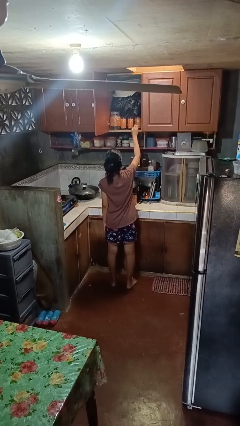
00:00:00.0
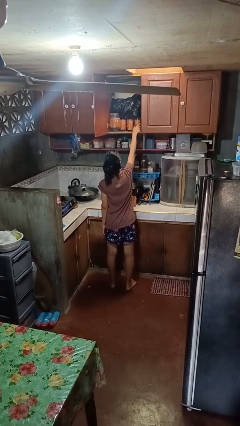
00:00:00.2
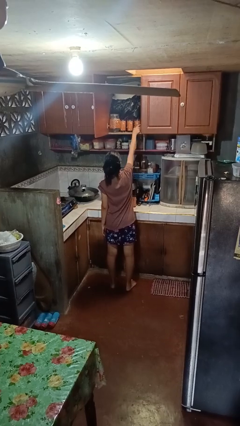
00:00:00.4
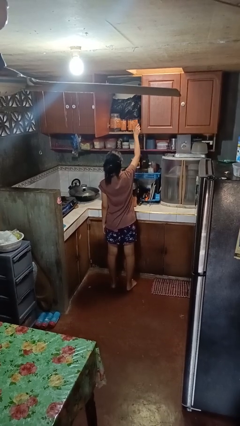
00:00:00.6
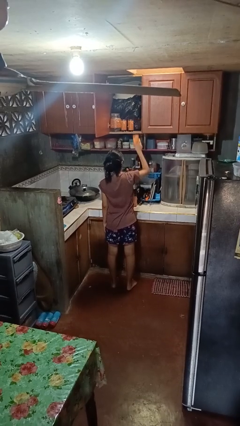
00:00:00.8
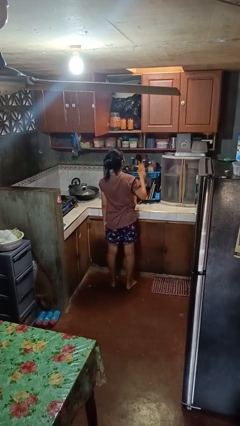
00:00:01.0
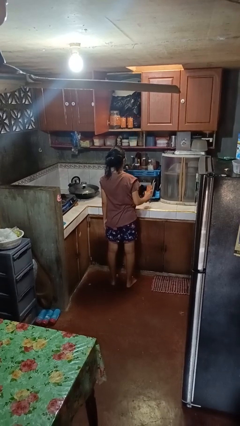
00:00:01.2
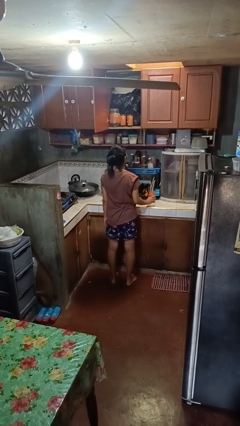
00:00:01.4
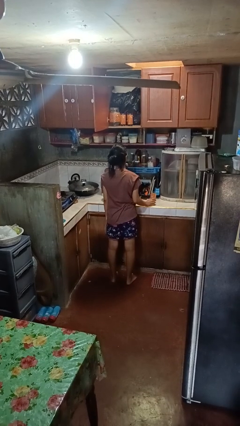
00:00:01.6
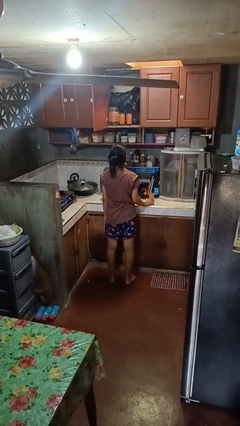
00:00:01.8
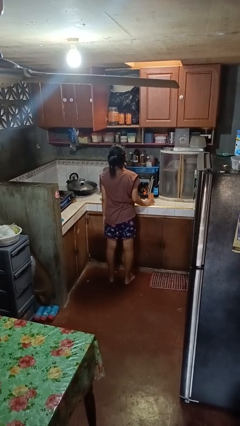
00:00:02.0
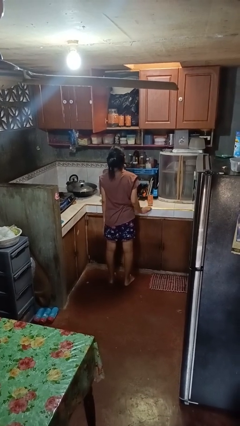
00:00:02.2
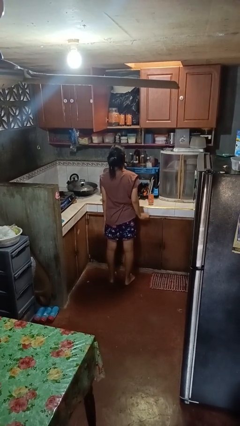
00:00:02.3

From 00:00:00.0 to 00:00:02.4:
person takes object from cabinet

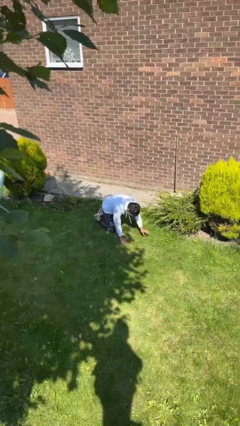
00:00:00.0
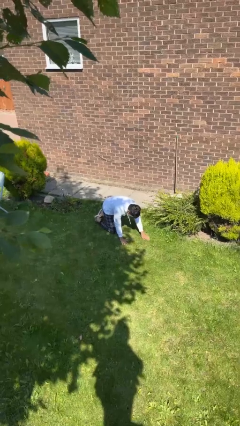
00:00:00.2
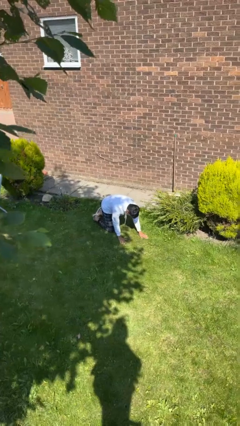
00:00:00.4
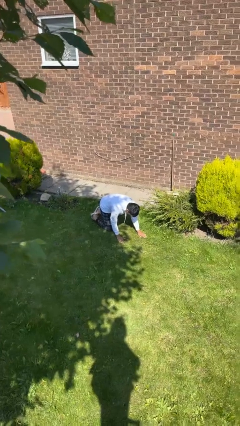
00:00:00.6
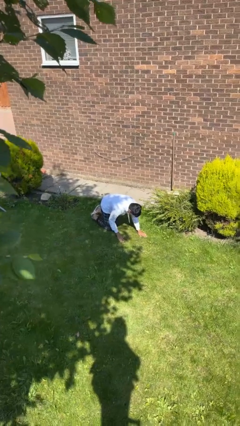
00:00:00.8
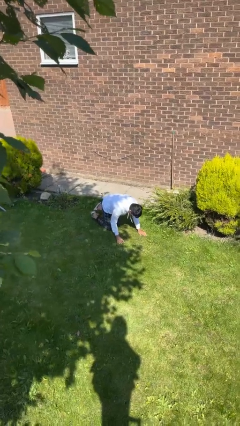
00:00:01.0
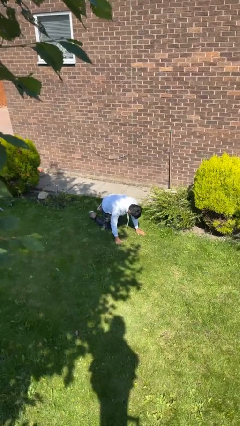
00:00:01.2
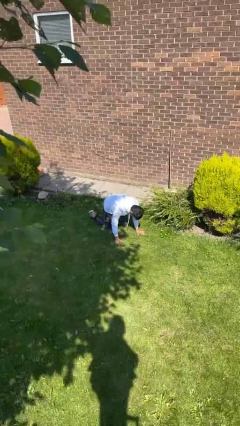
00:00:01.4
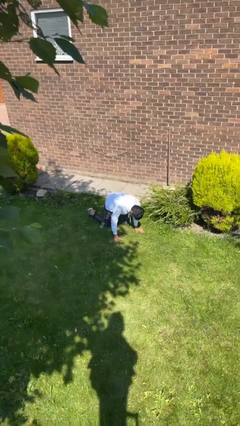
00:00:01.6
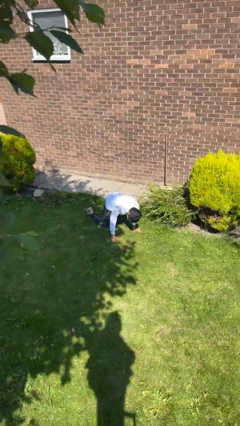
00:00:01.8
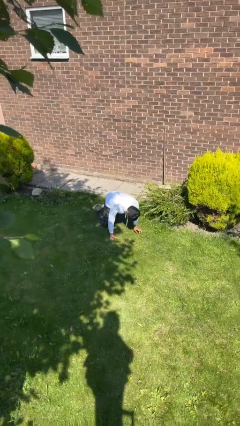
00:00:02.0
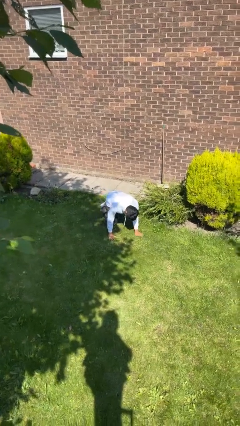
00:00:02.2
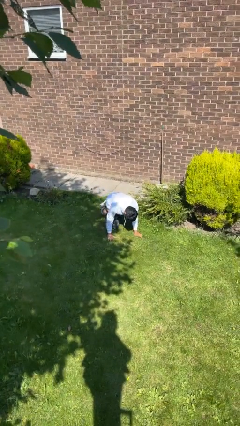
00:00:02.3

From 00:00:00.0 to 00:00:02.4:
person crawls

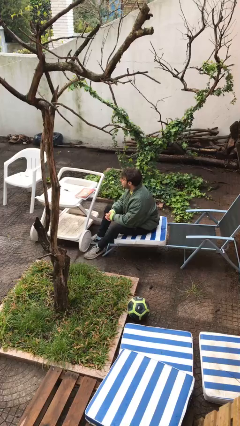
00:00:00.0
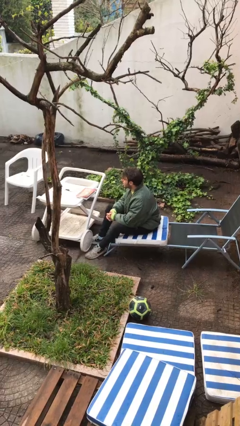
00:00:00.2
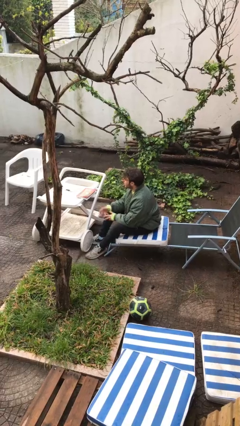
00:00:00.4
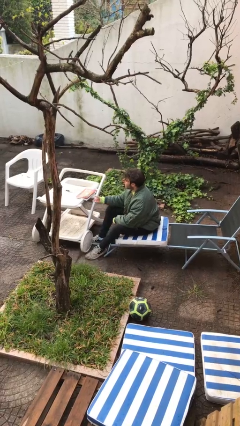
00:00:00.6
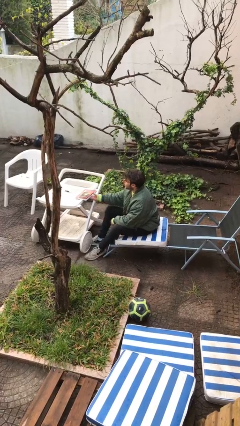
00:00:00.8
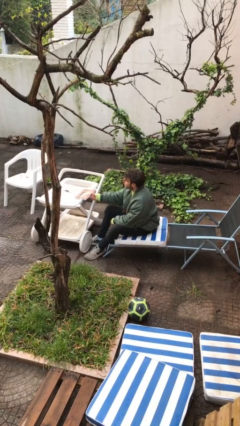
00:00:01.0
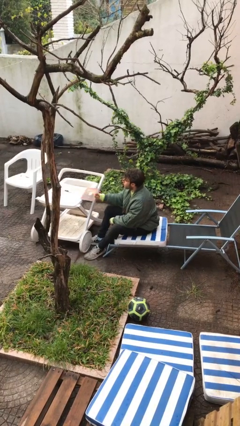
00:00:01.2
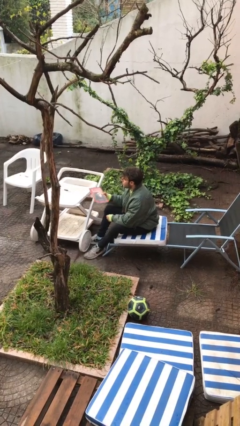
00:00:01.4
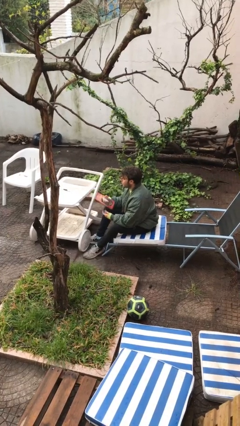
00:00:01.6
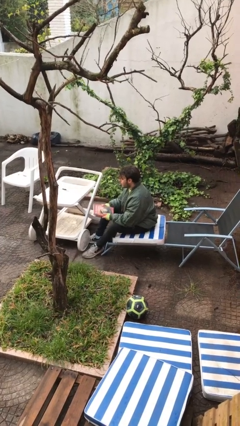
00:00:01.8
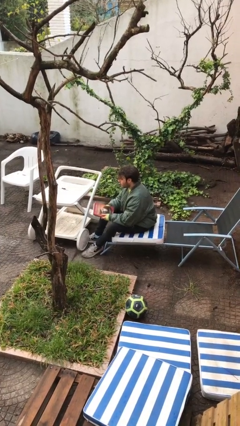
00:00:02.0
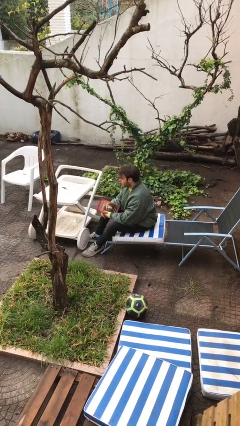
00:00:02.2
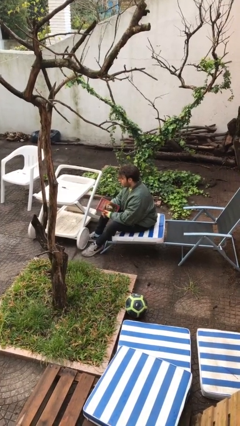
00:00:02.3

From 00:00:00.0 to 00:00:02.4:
person picks up object from table

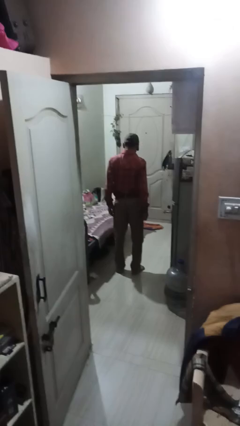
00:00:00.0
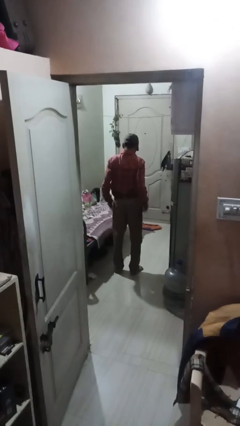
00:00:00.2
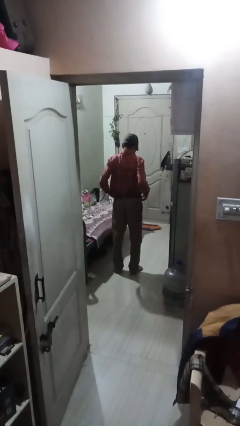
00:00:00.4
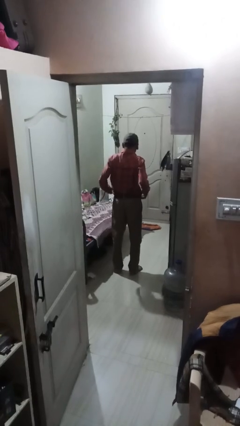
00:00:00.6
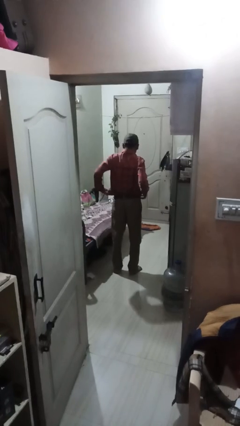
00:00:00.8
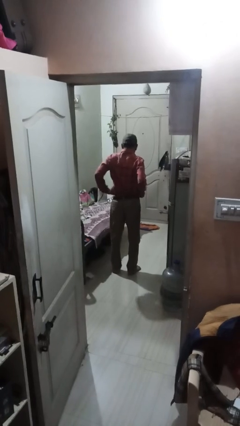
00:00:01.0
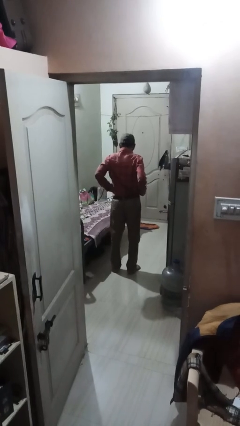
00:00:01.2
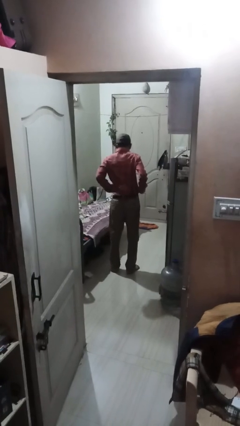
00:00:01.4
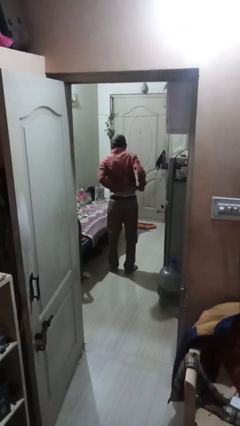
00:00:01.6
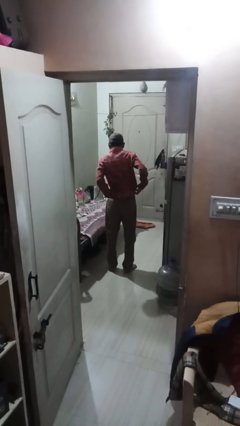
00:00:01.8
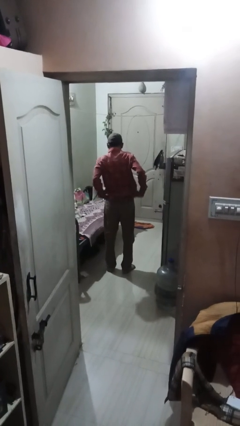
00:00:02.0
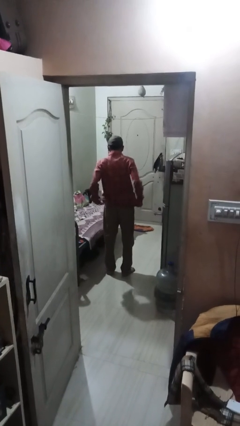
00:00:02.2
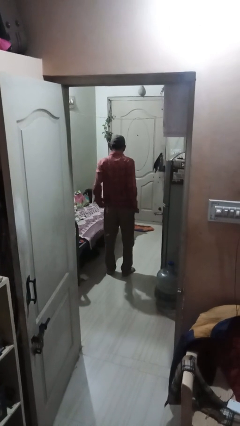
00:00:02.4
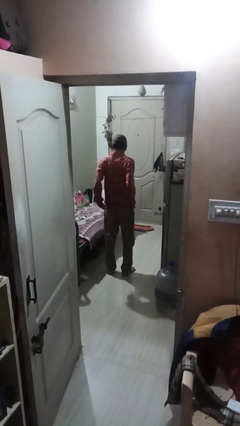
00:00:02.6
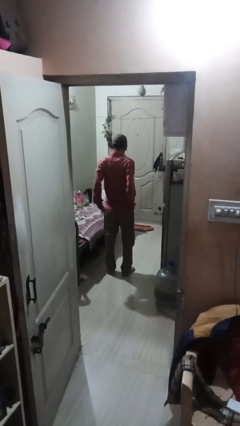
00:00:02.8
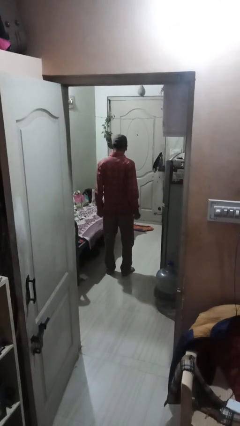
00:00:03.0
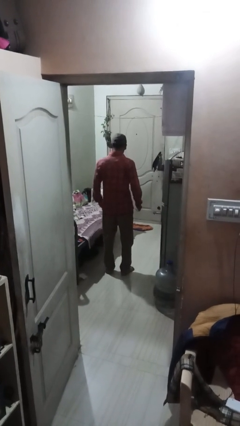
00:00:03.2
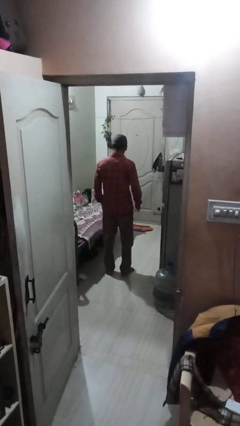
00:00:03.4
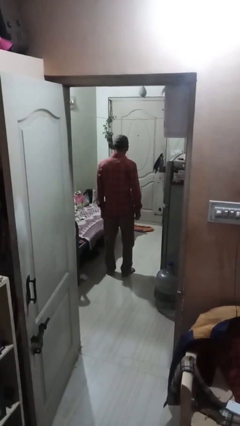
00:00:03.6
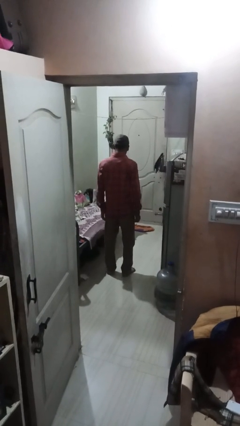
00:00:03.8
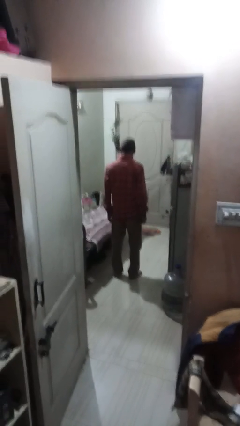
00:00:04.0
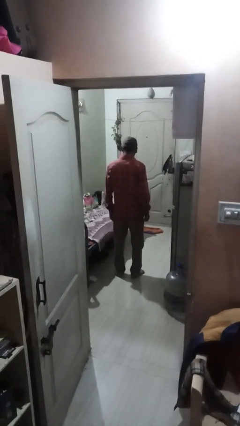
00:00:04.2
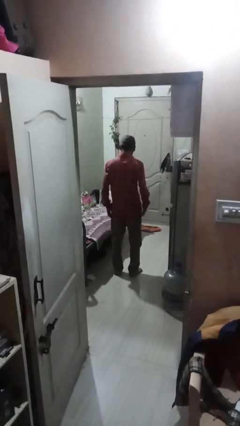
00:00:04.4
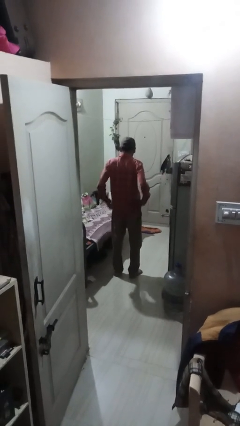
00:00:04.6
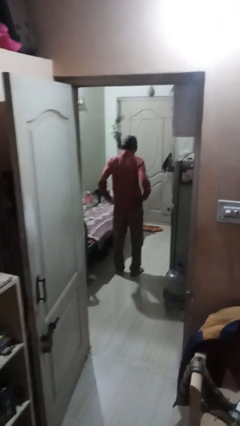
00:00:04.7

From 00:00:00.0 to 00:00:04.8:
person untucks shirt

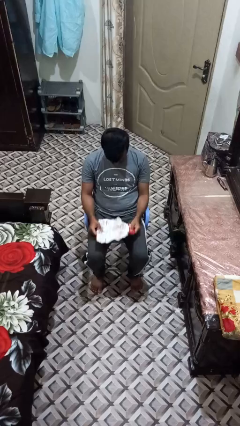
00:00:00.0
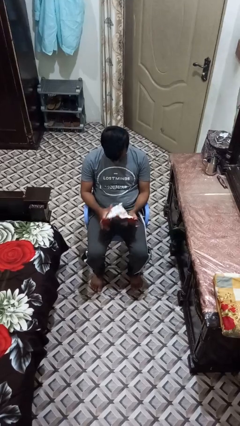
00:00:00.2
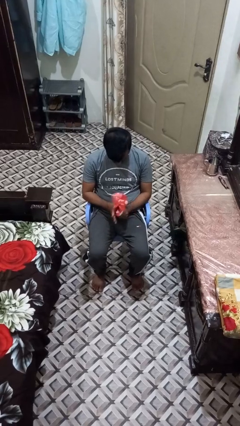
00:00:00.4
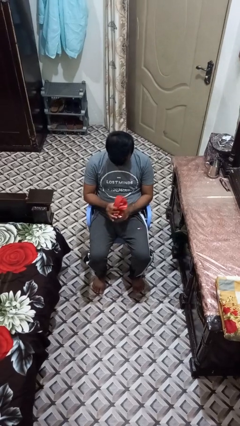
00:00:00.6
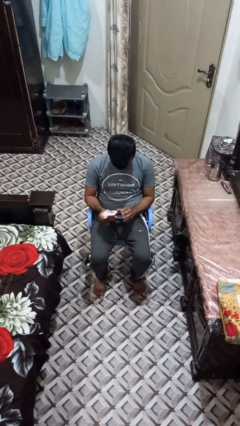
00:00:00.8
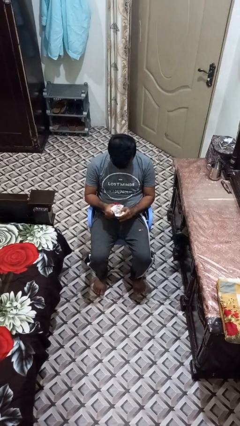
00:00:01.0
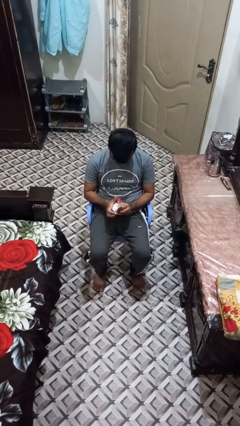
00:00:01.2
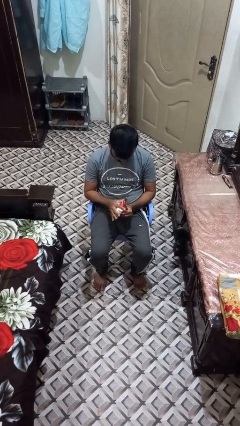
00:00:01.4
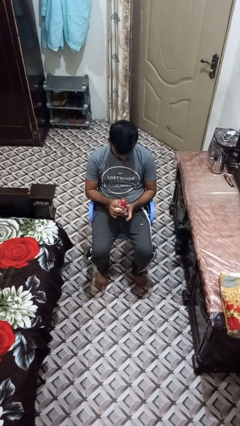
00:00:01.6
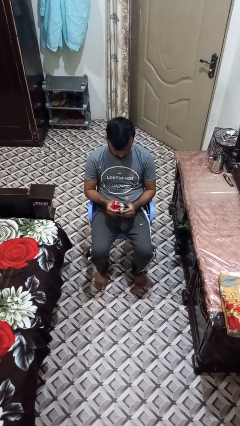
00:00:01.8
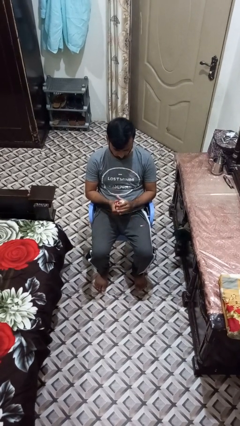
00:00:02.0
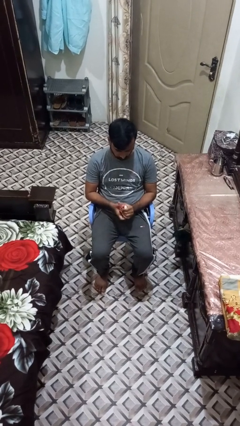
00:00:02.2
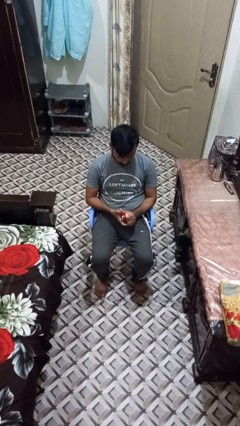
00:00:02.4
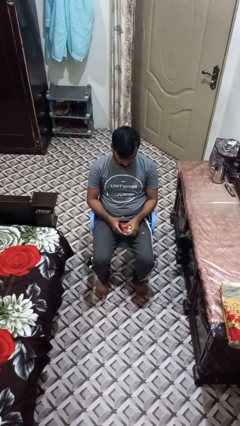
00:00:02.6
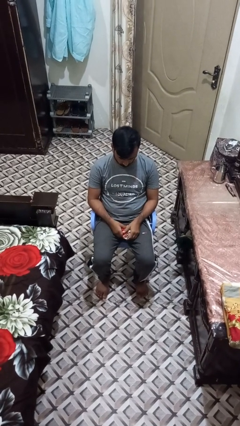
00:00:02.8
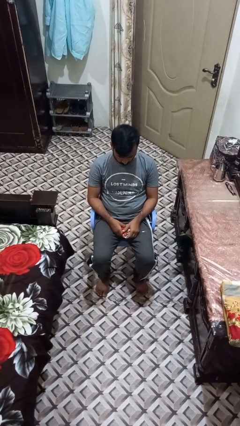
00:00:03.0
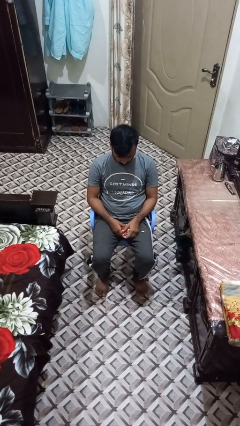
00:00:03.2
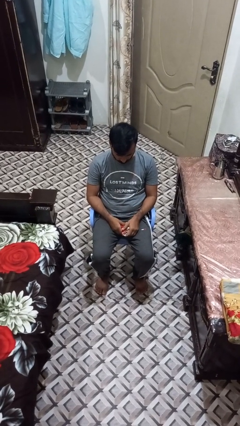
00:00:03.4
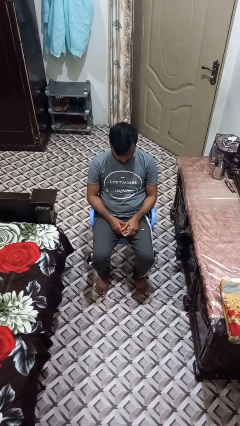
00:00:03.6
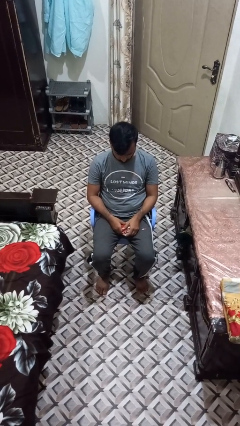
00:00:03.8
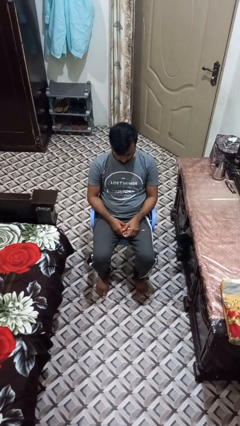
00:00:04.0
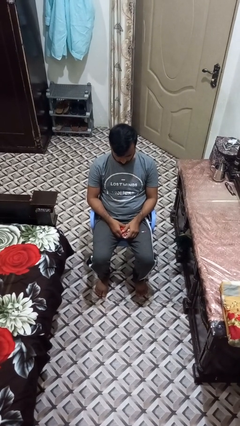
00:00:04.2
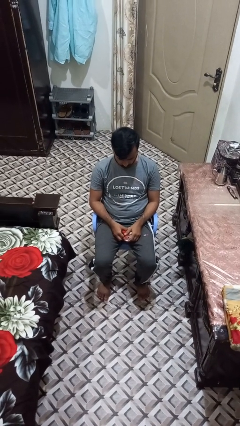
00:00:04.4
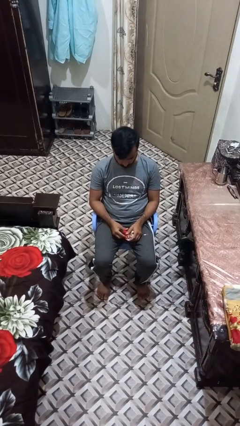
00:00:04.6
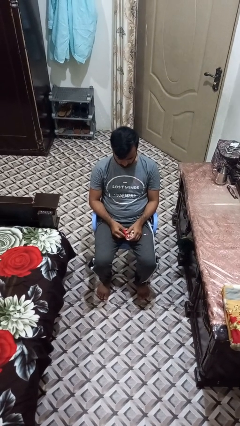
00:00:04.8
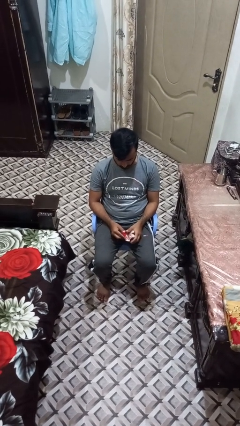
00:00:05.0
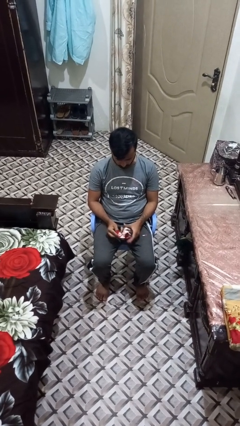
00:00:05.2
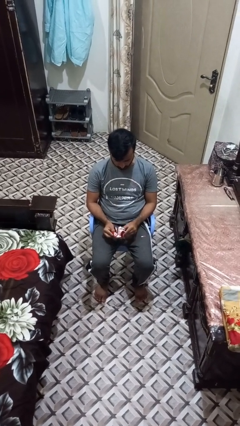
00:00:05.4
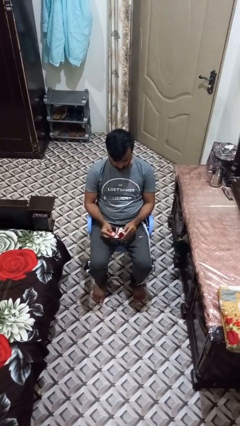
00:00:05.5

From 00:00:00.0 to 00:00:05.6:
person crumples paper
